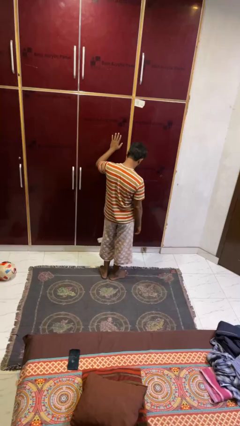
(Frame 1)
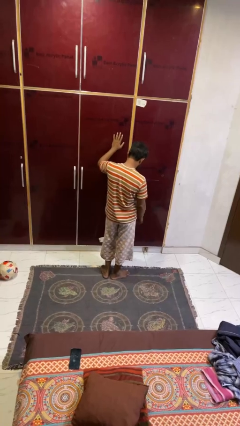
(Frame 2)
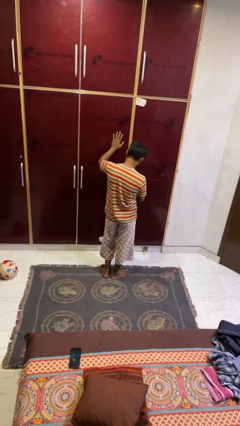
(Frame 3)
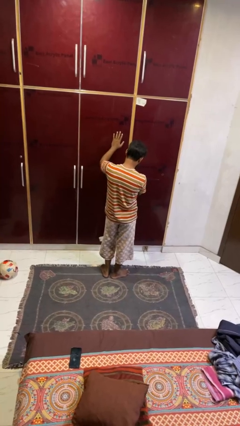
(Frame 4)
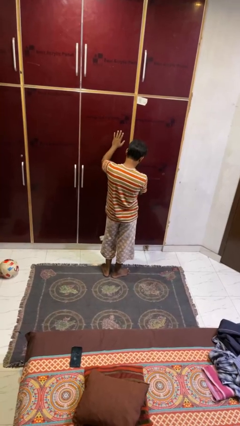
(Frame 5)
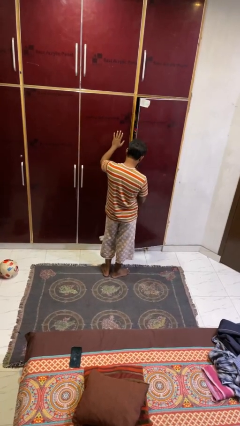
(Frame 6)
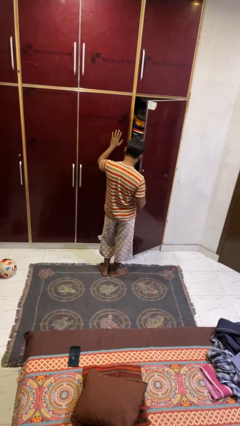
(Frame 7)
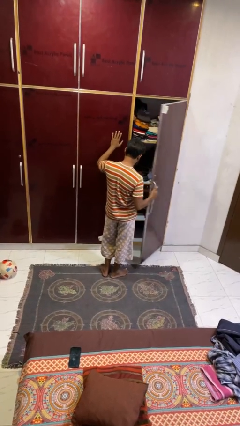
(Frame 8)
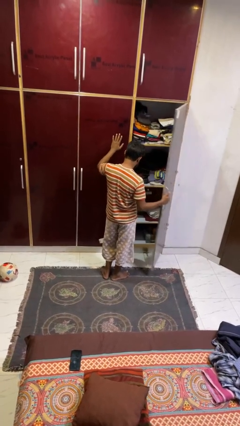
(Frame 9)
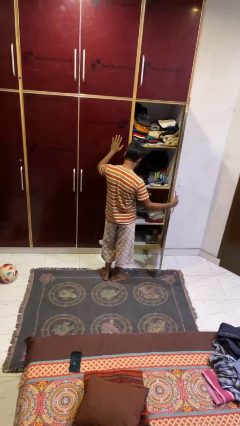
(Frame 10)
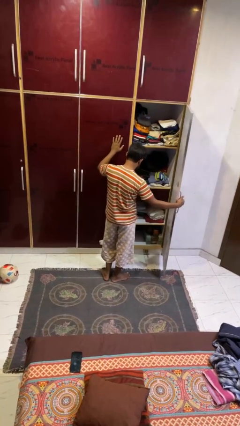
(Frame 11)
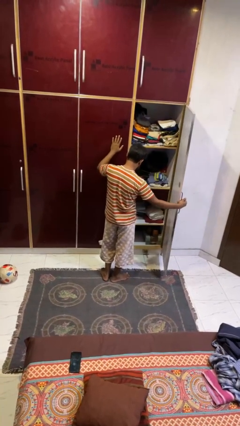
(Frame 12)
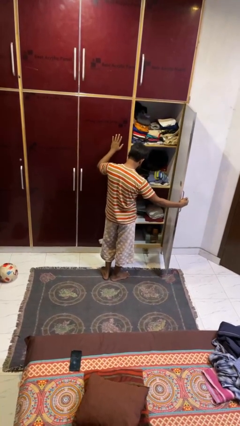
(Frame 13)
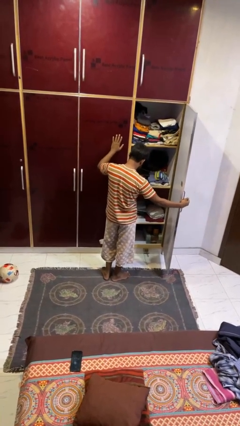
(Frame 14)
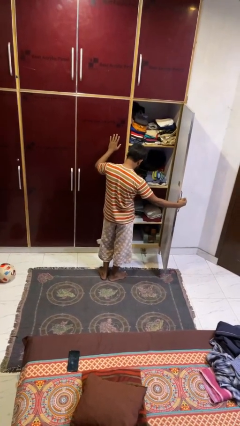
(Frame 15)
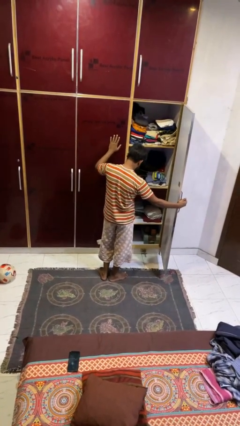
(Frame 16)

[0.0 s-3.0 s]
person opens closet door

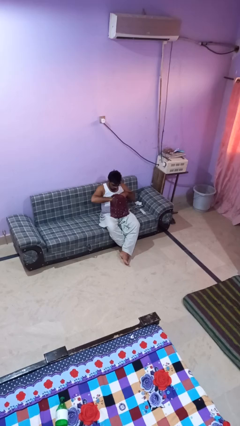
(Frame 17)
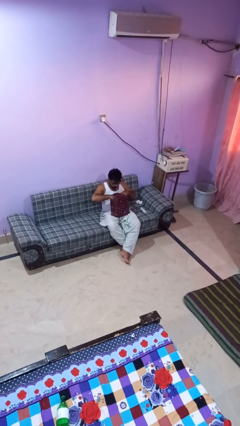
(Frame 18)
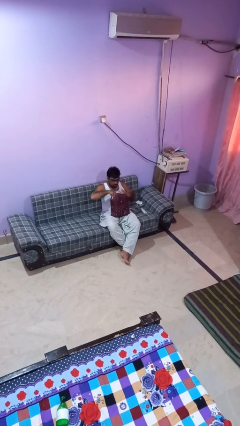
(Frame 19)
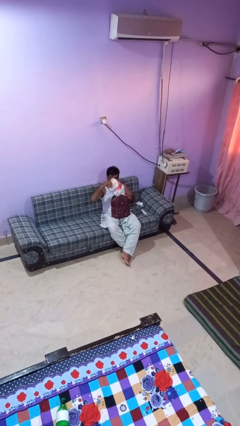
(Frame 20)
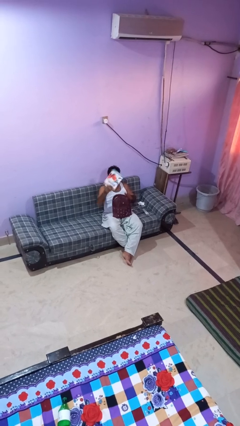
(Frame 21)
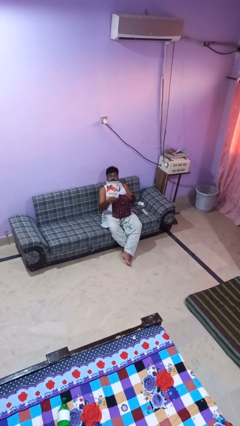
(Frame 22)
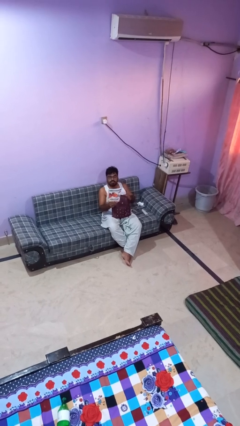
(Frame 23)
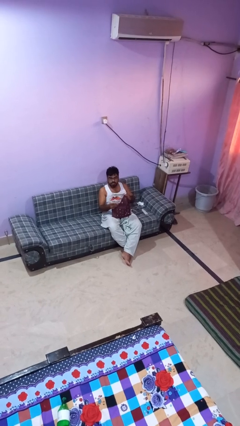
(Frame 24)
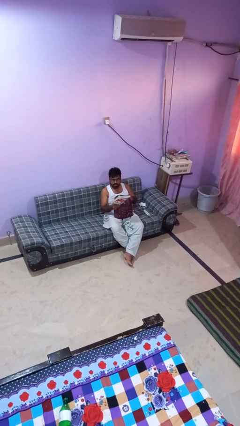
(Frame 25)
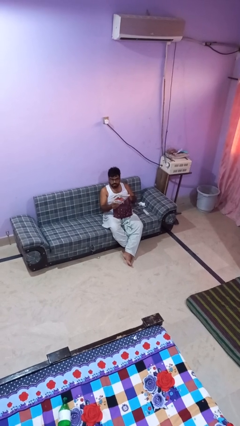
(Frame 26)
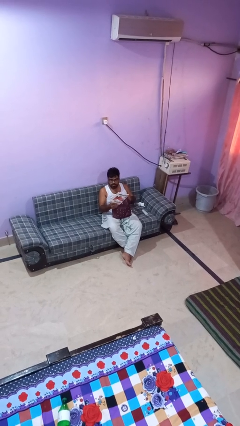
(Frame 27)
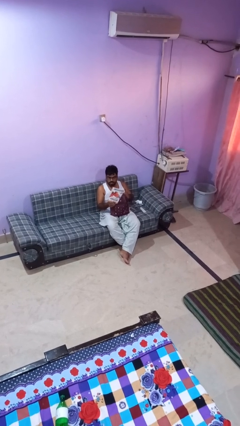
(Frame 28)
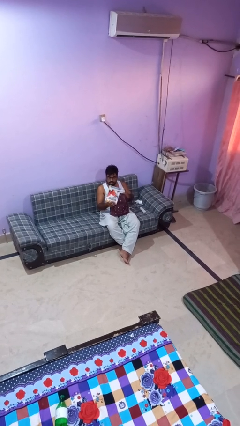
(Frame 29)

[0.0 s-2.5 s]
person takes object from backpack

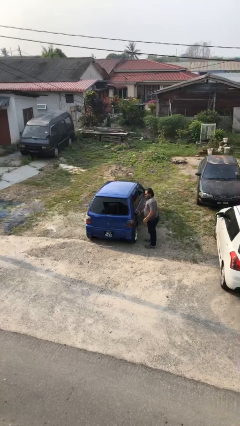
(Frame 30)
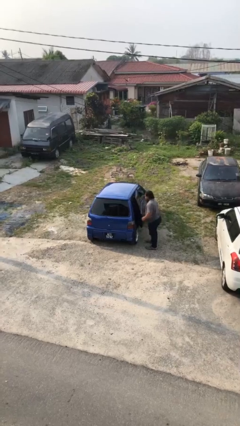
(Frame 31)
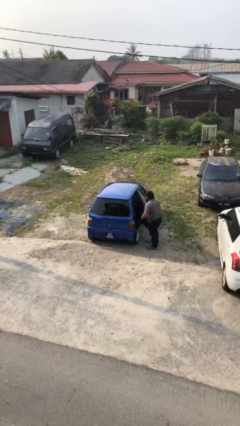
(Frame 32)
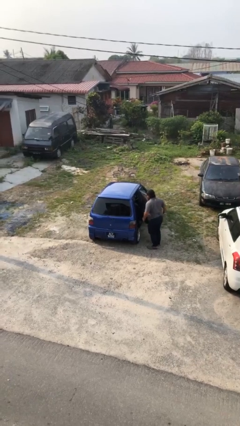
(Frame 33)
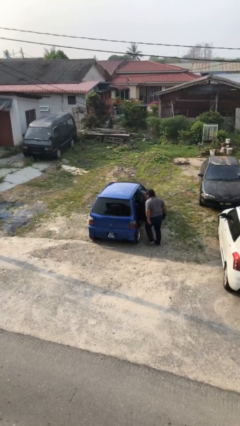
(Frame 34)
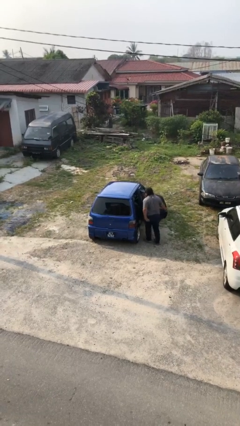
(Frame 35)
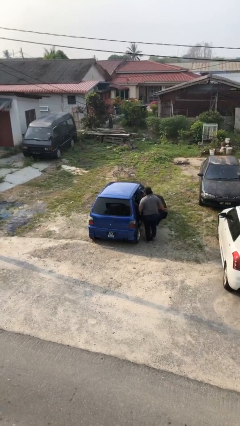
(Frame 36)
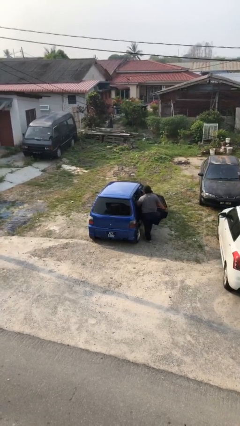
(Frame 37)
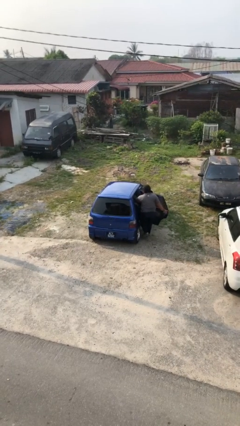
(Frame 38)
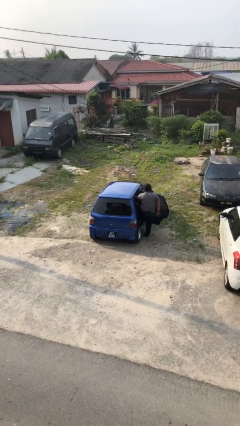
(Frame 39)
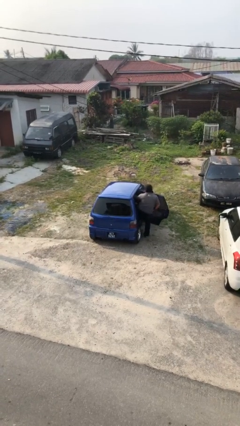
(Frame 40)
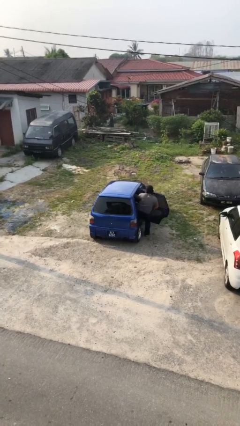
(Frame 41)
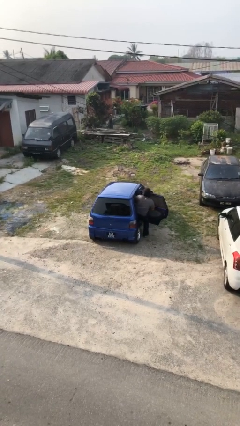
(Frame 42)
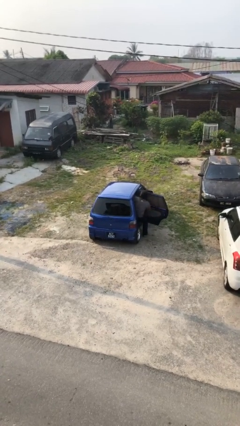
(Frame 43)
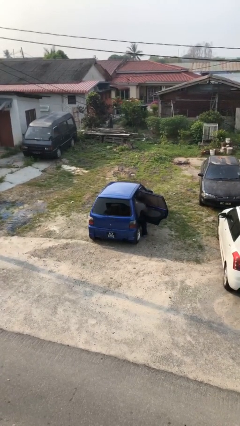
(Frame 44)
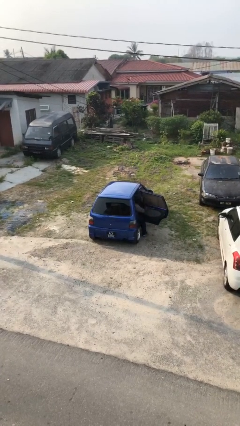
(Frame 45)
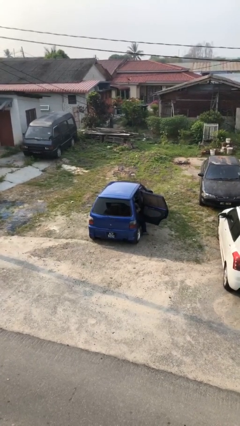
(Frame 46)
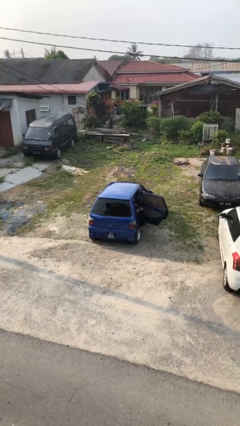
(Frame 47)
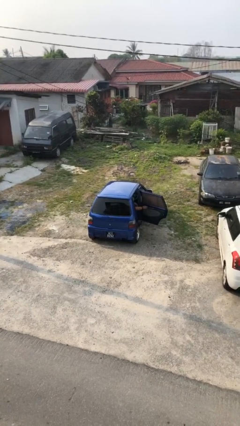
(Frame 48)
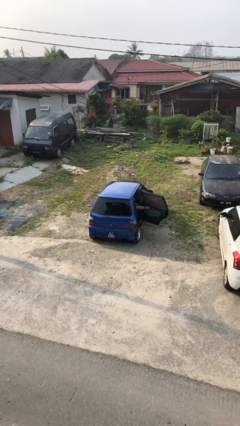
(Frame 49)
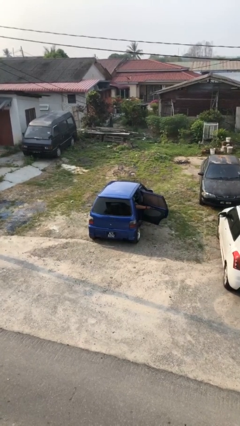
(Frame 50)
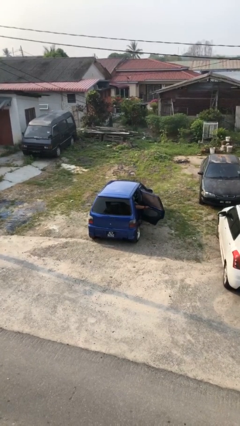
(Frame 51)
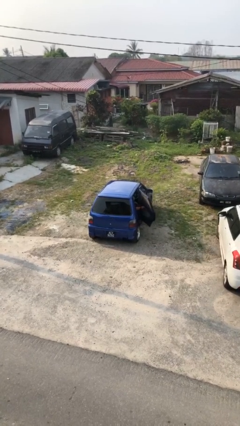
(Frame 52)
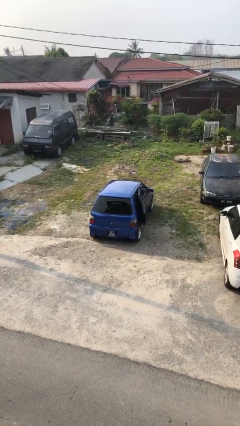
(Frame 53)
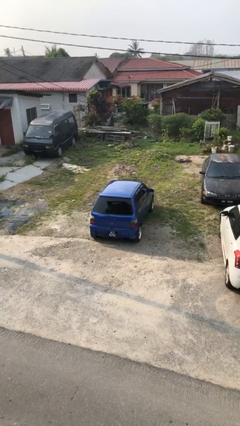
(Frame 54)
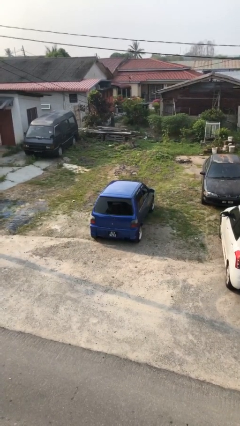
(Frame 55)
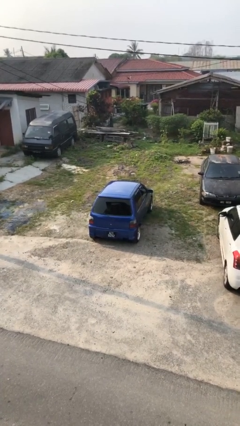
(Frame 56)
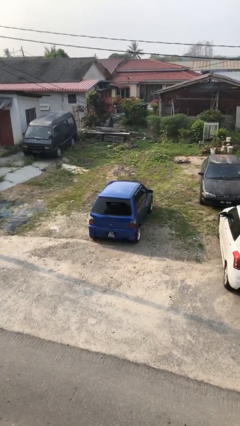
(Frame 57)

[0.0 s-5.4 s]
car picks up person

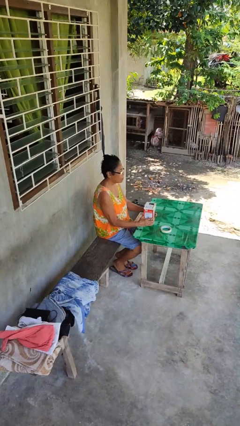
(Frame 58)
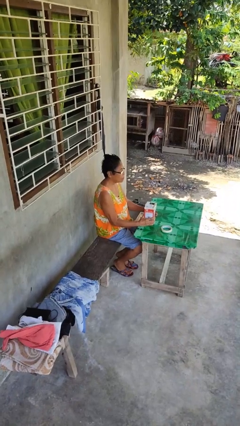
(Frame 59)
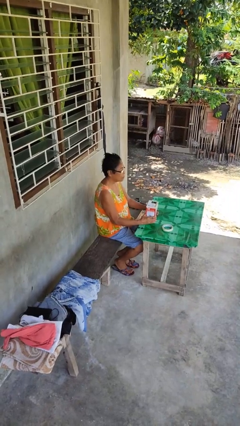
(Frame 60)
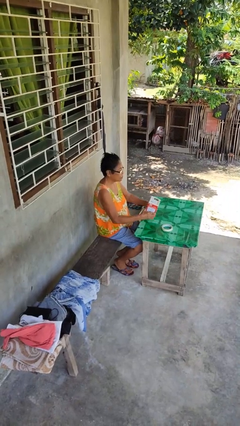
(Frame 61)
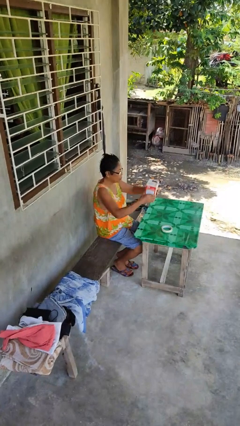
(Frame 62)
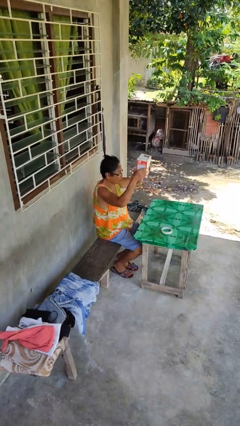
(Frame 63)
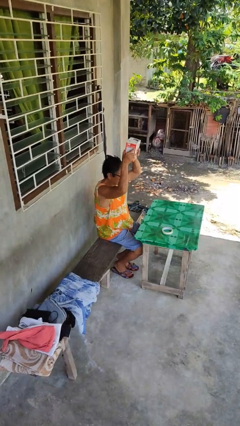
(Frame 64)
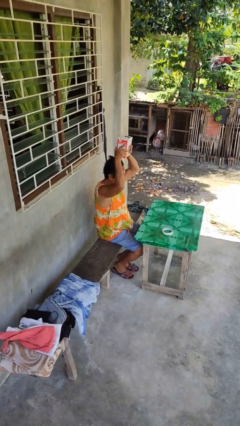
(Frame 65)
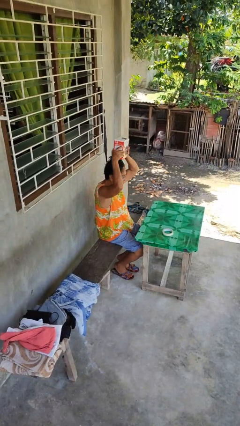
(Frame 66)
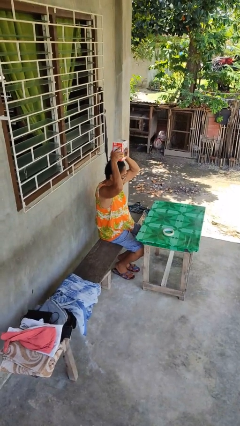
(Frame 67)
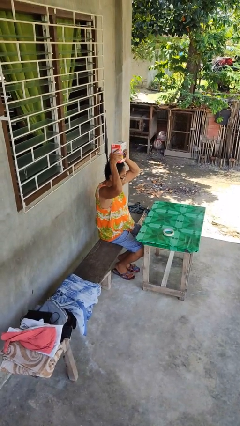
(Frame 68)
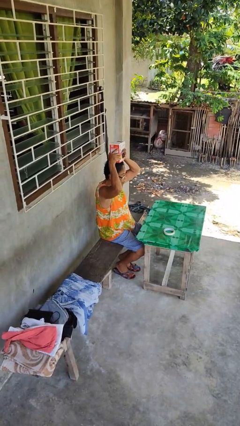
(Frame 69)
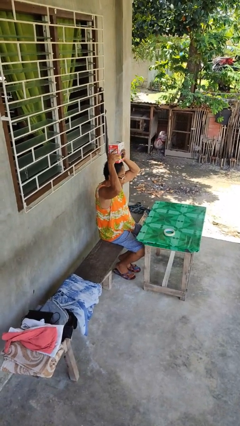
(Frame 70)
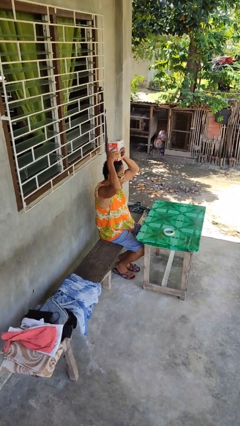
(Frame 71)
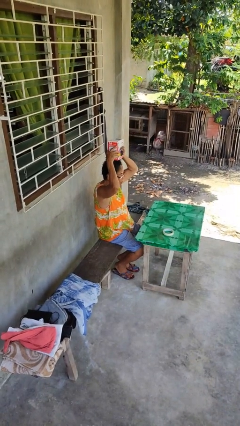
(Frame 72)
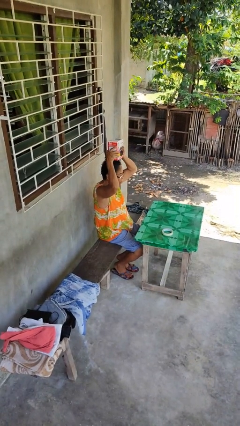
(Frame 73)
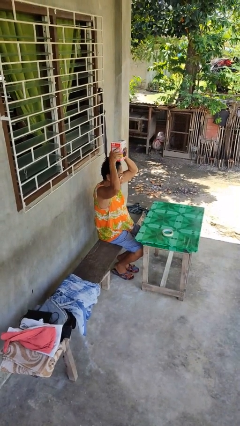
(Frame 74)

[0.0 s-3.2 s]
person holds object above head

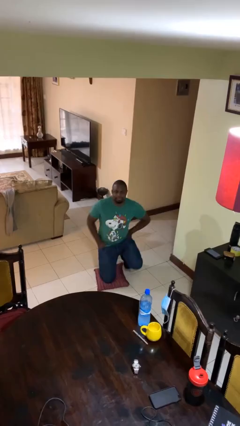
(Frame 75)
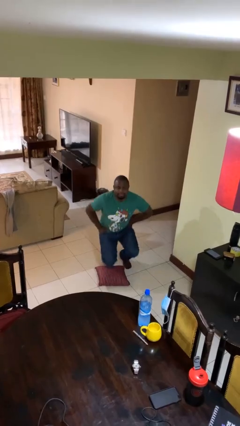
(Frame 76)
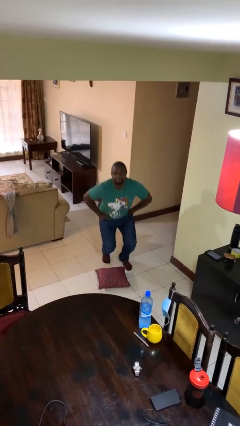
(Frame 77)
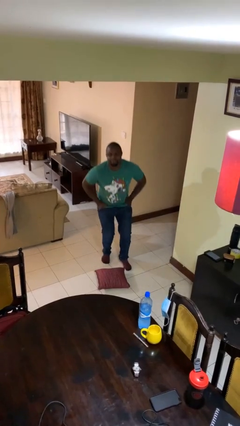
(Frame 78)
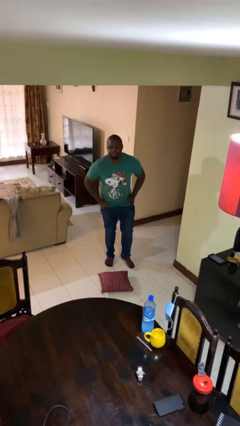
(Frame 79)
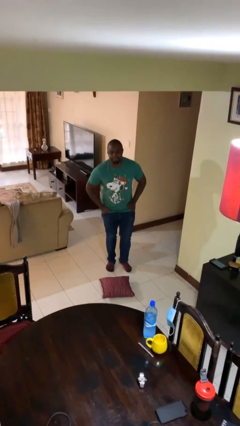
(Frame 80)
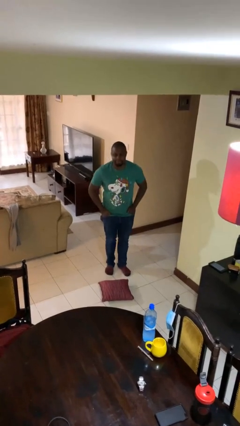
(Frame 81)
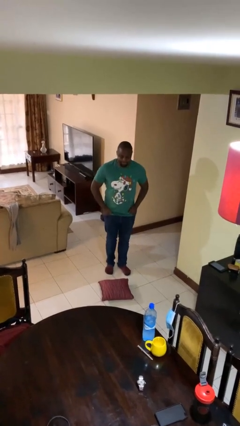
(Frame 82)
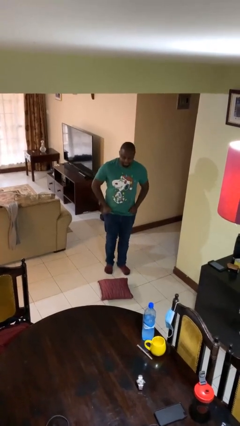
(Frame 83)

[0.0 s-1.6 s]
person stands up from floor

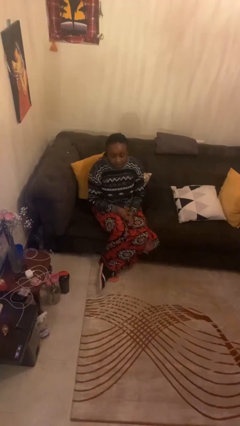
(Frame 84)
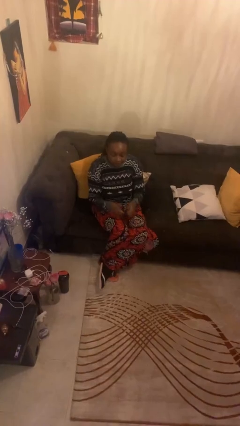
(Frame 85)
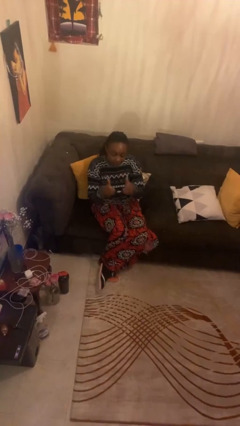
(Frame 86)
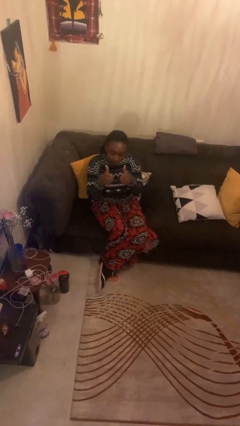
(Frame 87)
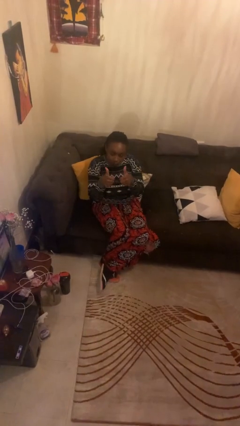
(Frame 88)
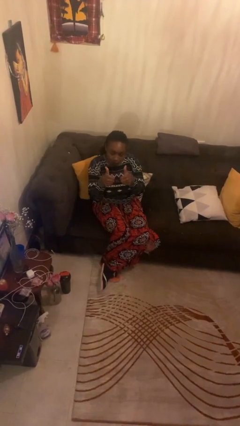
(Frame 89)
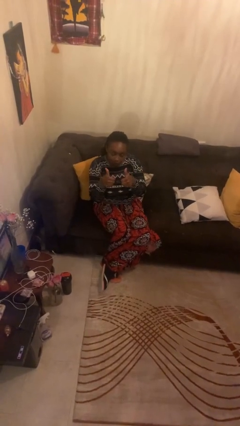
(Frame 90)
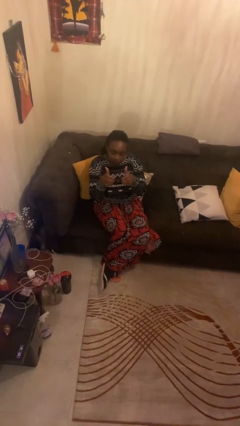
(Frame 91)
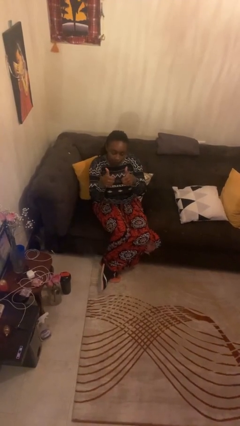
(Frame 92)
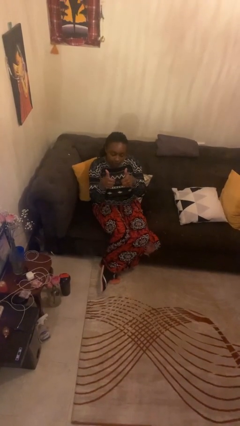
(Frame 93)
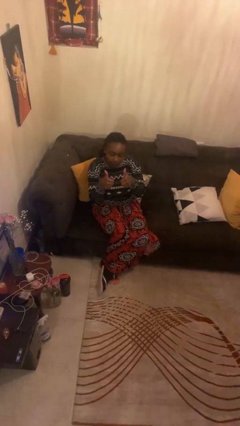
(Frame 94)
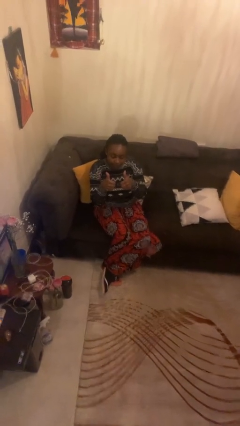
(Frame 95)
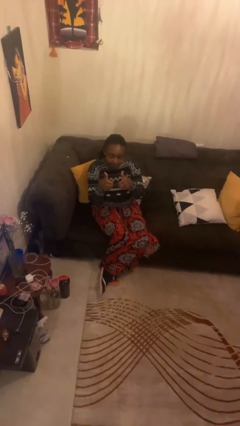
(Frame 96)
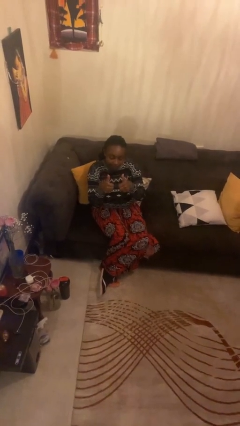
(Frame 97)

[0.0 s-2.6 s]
person gestures thumbs up
